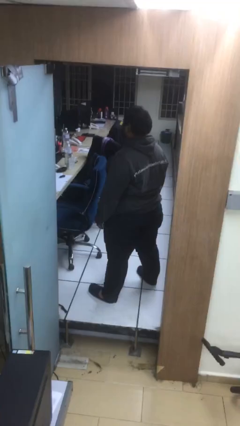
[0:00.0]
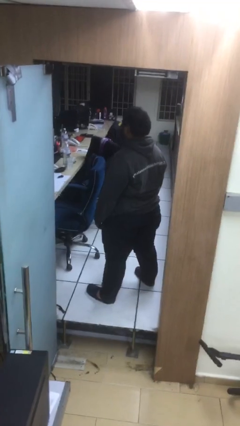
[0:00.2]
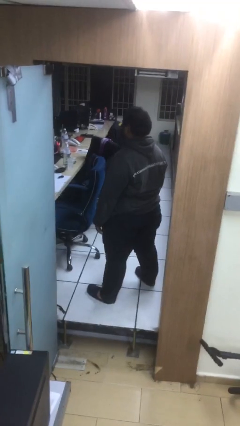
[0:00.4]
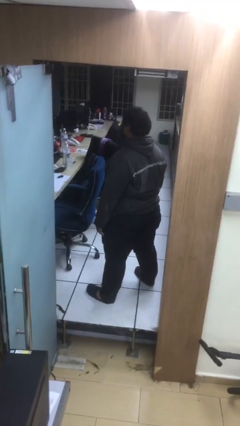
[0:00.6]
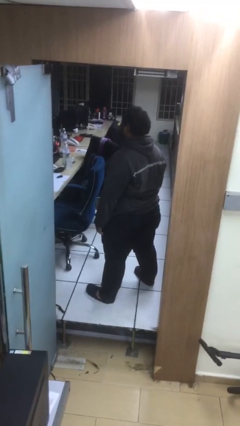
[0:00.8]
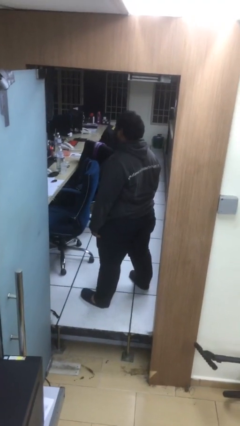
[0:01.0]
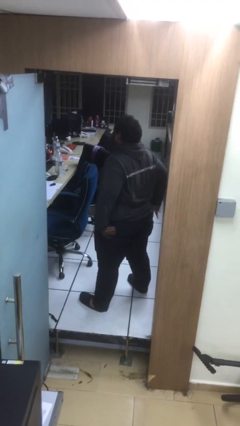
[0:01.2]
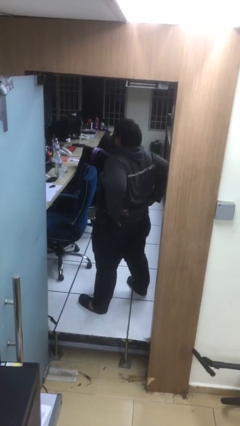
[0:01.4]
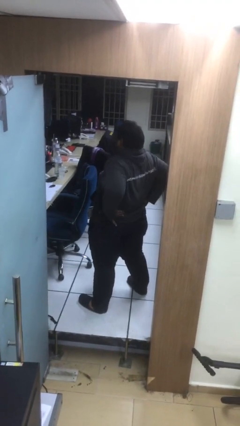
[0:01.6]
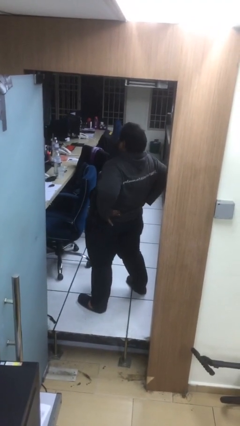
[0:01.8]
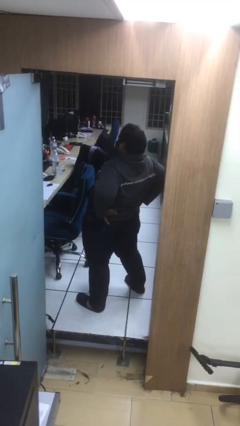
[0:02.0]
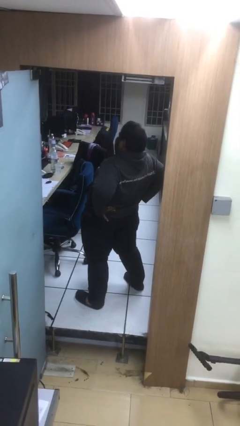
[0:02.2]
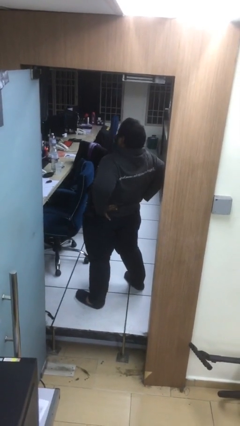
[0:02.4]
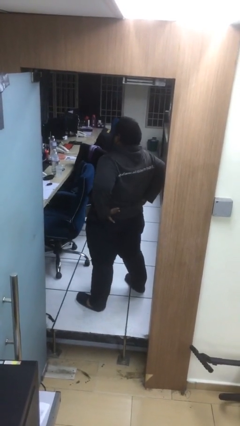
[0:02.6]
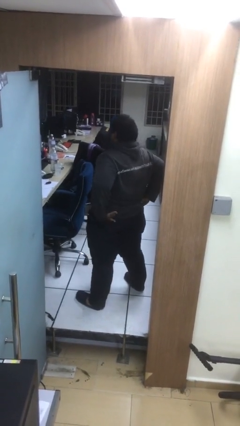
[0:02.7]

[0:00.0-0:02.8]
person stretches back

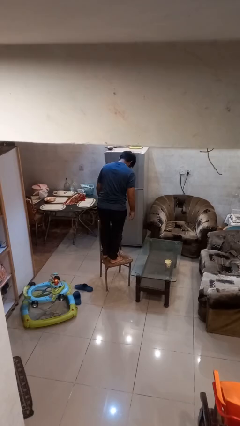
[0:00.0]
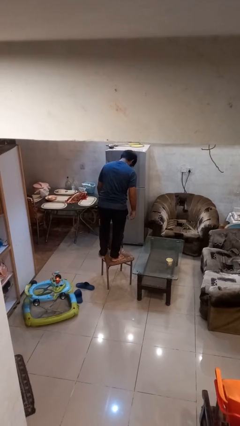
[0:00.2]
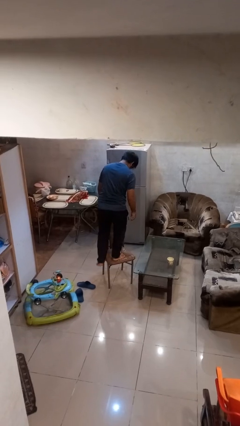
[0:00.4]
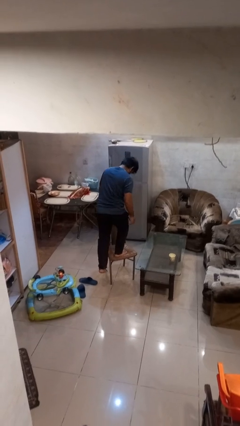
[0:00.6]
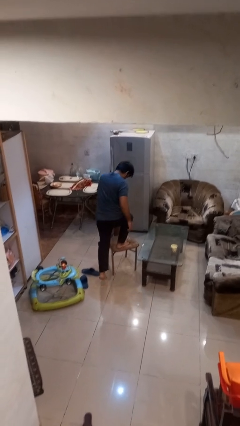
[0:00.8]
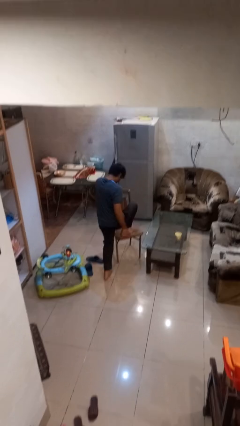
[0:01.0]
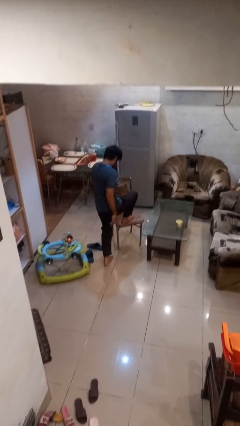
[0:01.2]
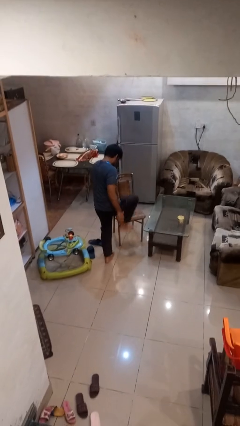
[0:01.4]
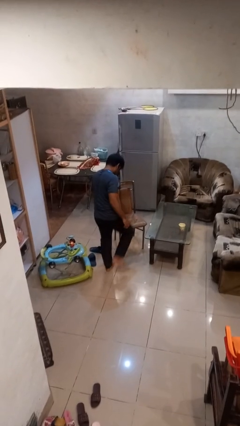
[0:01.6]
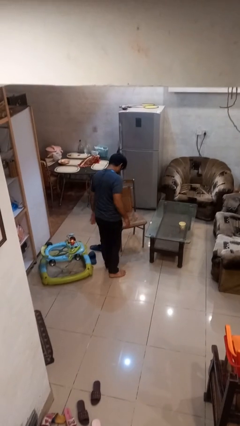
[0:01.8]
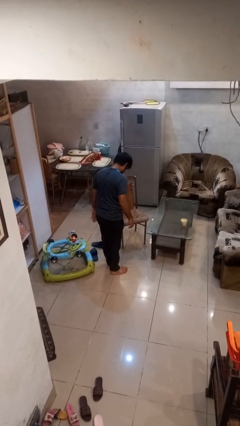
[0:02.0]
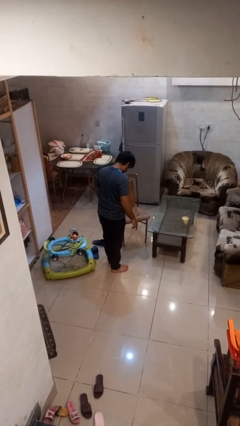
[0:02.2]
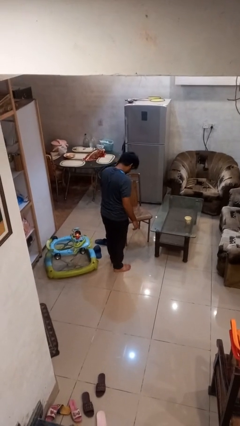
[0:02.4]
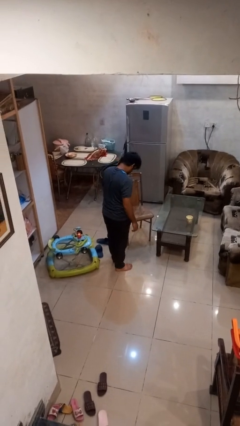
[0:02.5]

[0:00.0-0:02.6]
person climbs off chair

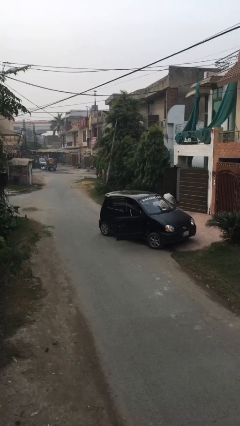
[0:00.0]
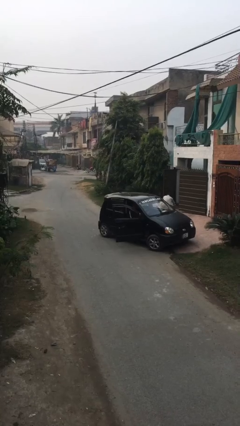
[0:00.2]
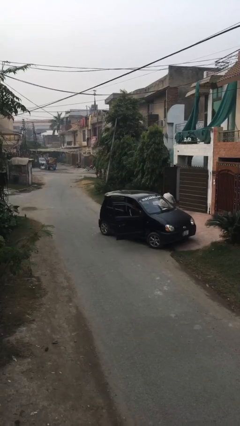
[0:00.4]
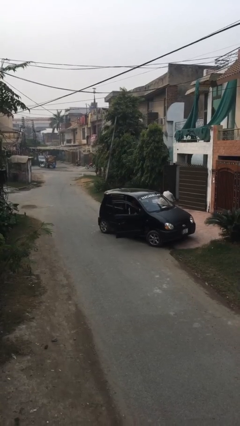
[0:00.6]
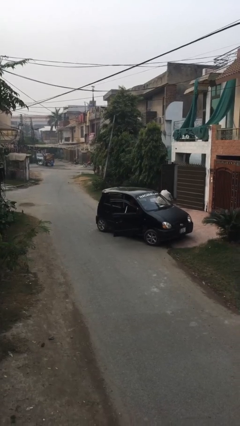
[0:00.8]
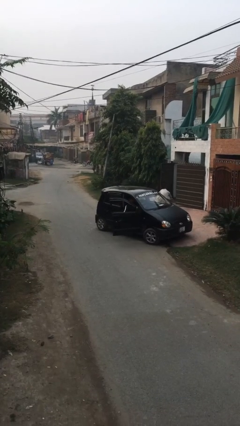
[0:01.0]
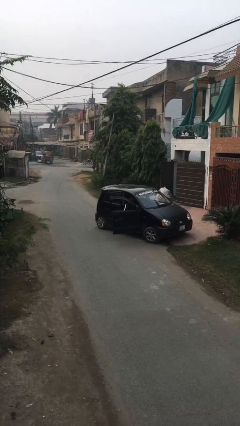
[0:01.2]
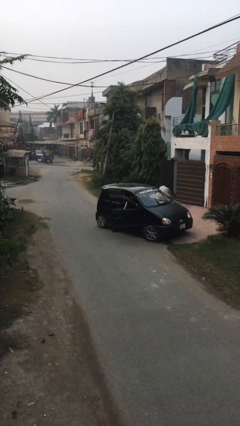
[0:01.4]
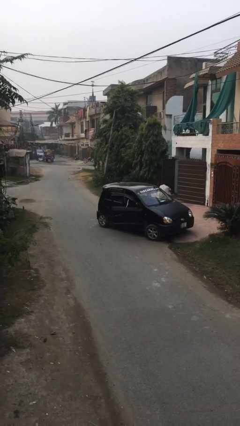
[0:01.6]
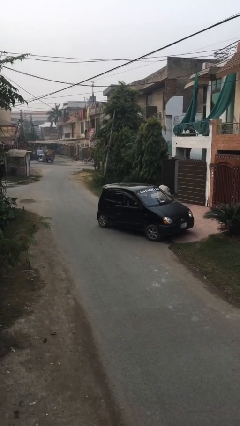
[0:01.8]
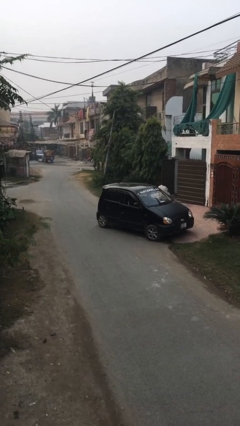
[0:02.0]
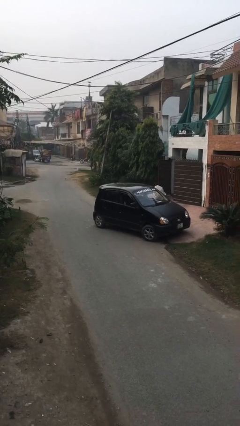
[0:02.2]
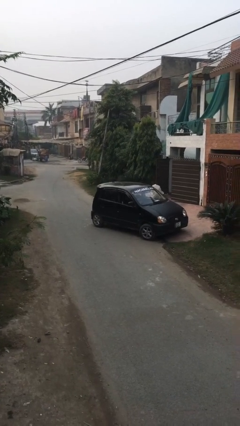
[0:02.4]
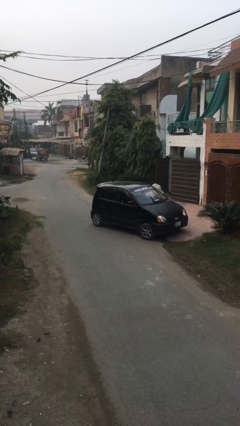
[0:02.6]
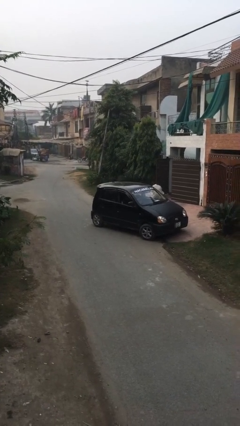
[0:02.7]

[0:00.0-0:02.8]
person closes car door

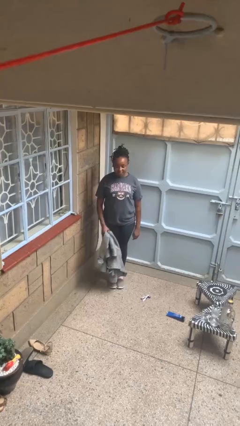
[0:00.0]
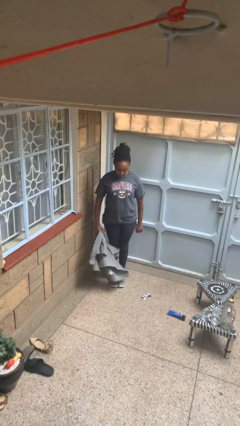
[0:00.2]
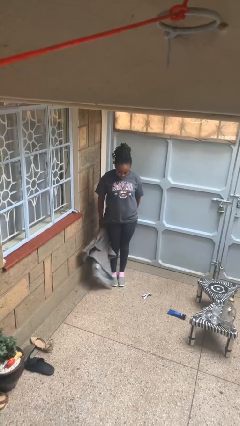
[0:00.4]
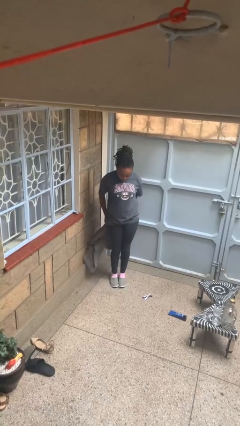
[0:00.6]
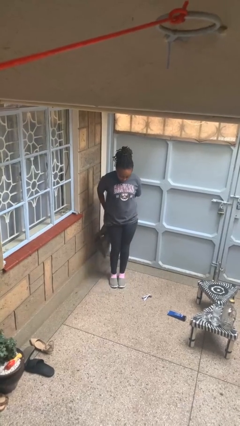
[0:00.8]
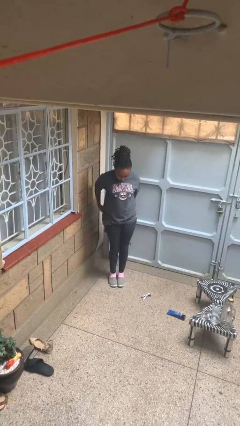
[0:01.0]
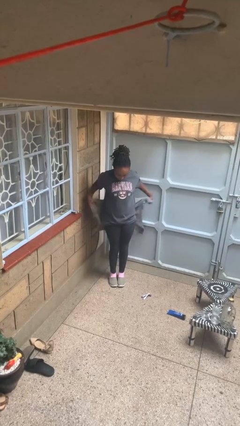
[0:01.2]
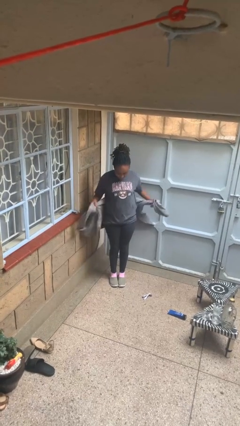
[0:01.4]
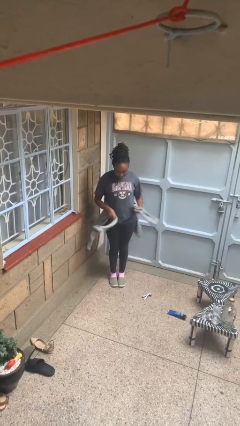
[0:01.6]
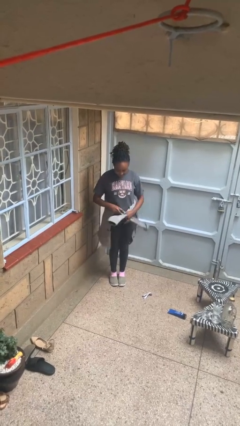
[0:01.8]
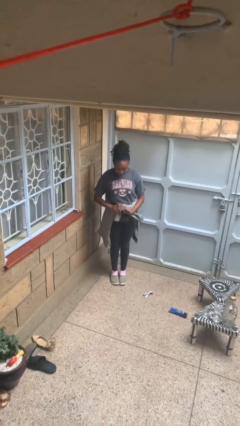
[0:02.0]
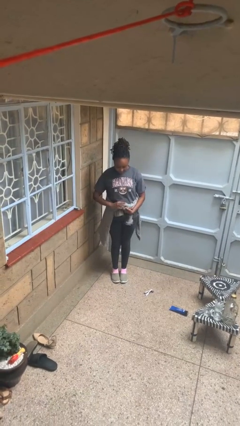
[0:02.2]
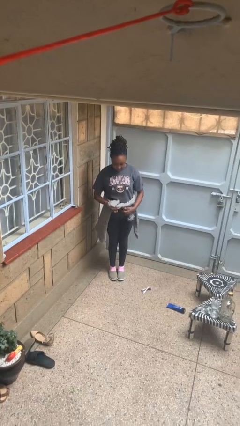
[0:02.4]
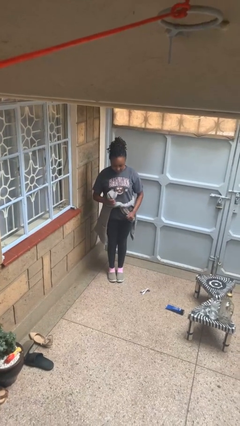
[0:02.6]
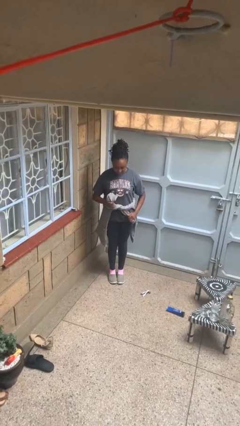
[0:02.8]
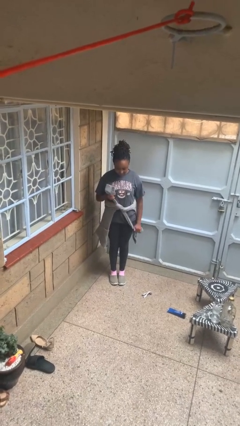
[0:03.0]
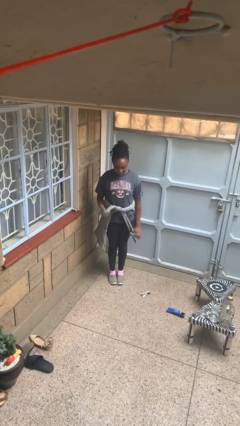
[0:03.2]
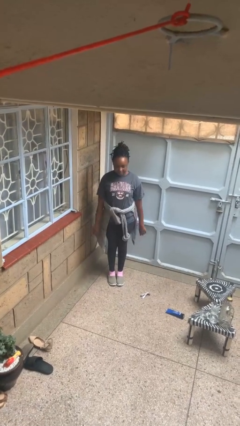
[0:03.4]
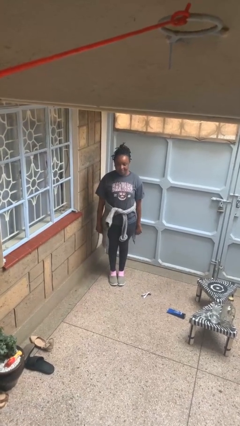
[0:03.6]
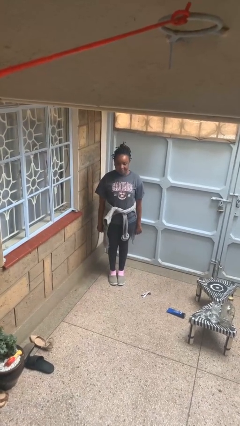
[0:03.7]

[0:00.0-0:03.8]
person ties jacket around waist

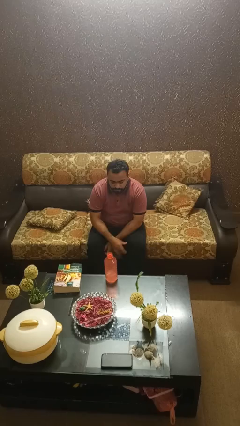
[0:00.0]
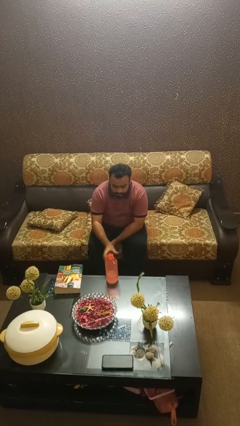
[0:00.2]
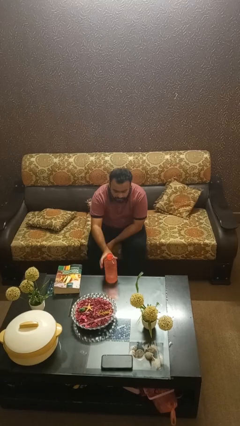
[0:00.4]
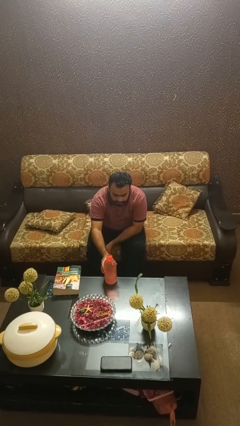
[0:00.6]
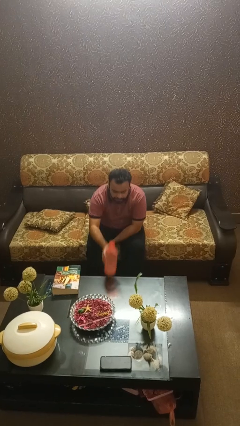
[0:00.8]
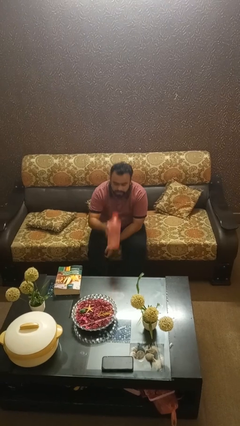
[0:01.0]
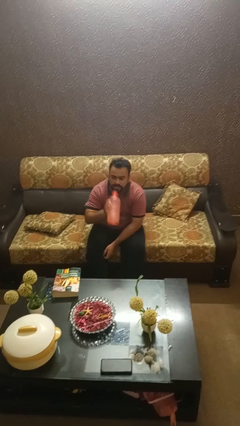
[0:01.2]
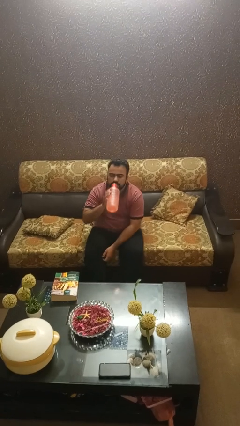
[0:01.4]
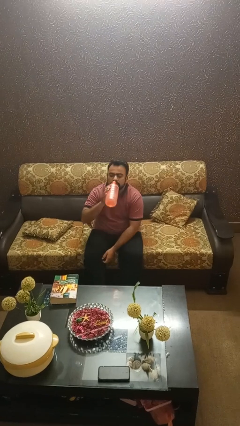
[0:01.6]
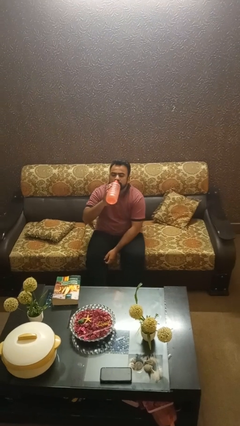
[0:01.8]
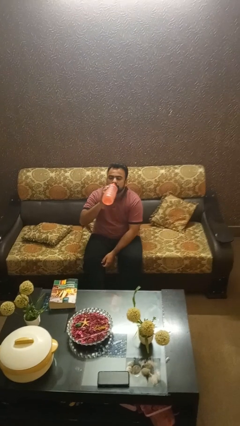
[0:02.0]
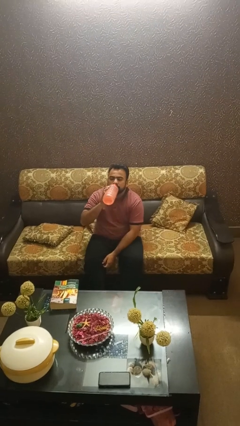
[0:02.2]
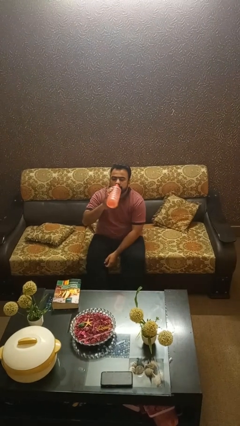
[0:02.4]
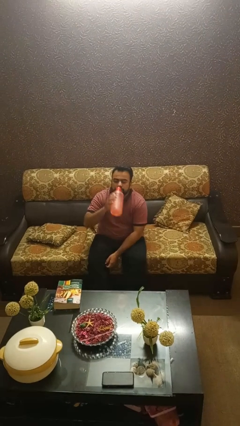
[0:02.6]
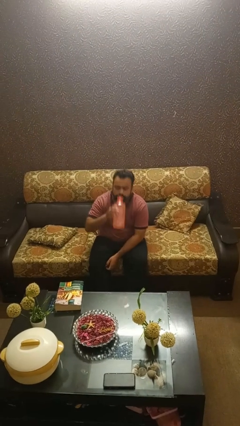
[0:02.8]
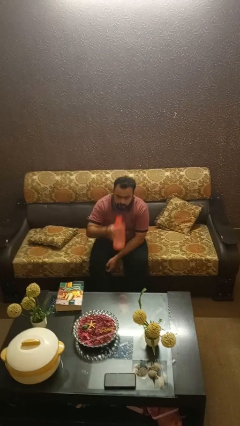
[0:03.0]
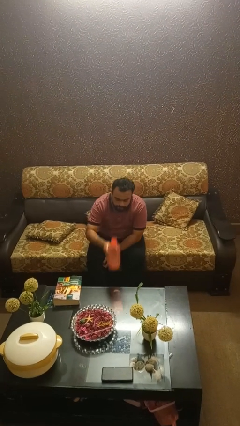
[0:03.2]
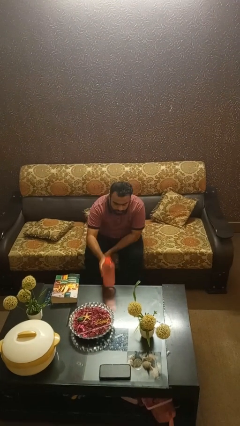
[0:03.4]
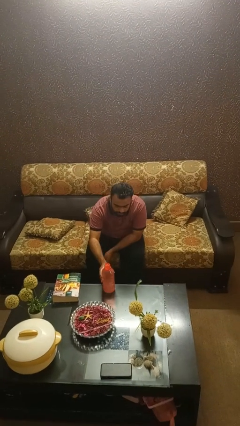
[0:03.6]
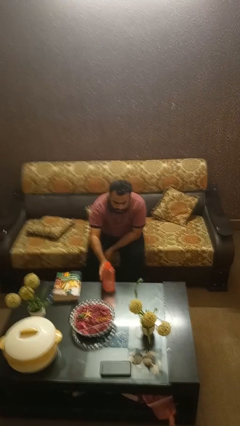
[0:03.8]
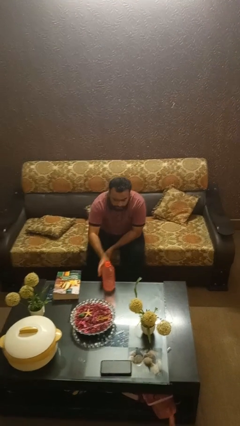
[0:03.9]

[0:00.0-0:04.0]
person drinks from bottle

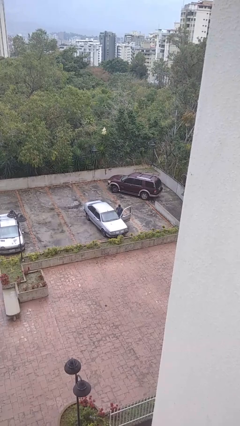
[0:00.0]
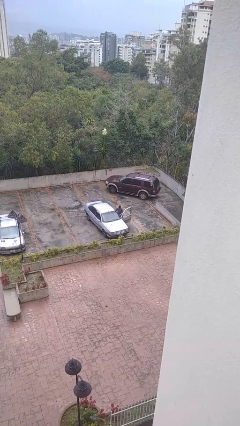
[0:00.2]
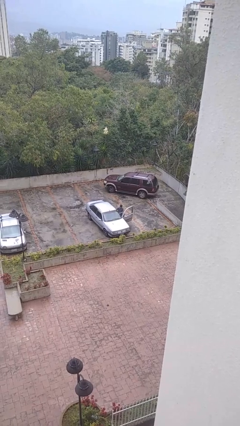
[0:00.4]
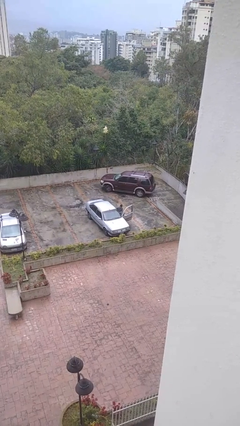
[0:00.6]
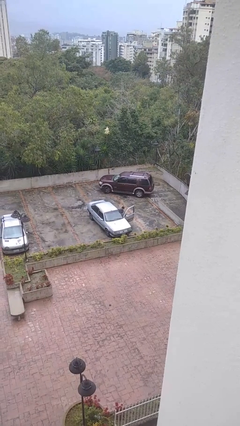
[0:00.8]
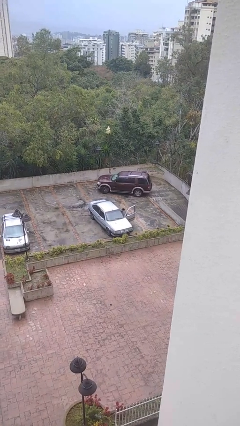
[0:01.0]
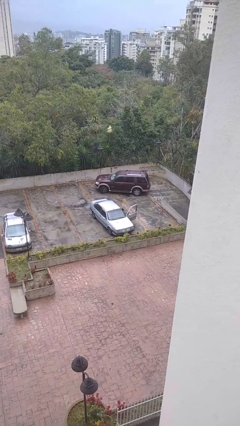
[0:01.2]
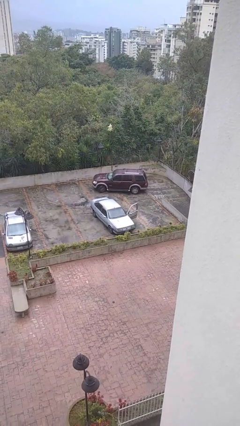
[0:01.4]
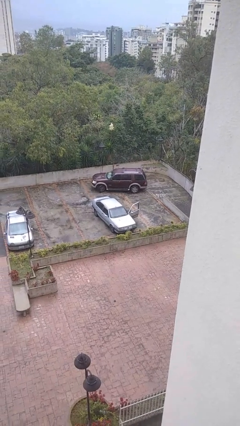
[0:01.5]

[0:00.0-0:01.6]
person enters car
